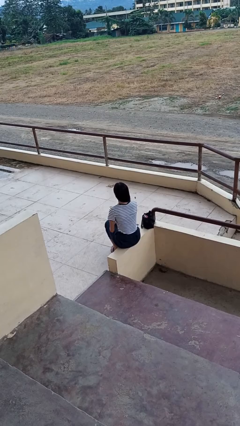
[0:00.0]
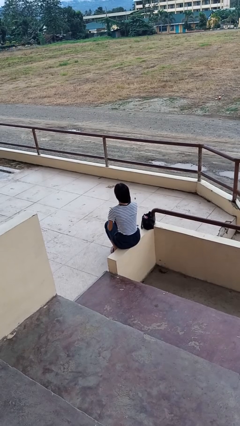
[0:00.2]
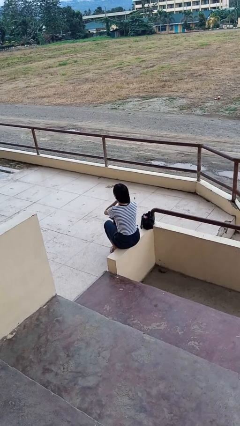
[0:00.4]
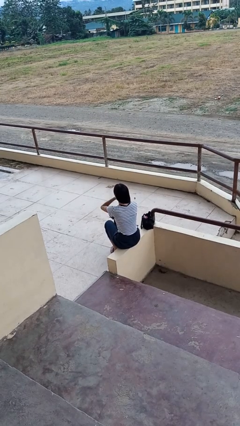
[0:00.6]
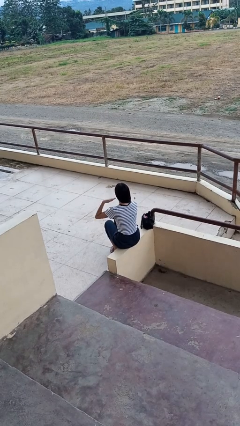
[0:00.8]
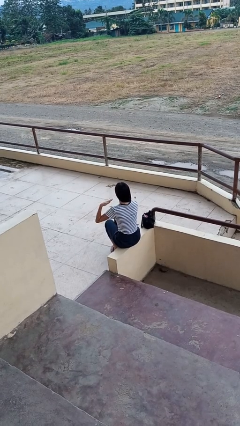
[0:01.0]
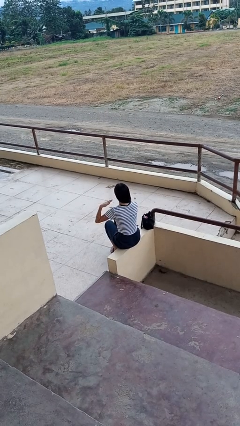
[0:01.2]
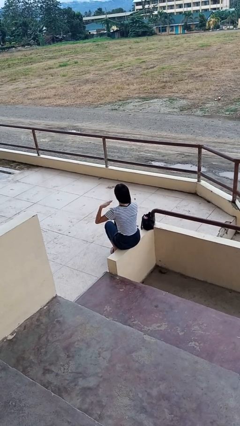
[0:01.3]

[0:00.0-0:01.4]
person gestures cut

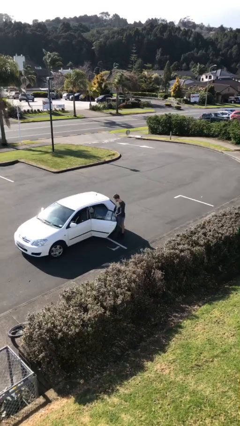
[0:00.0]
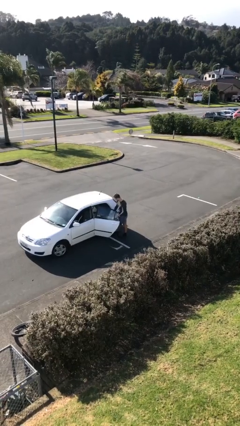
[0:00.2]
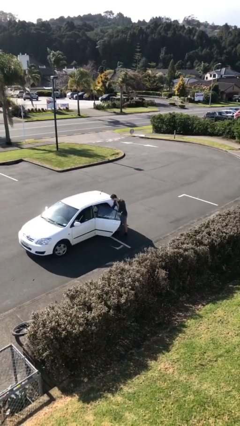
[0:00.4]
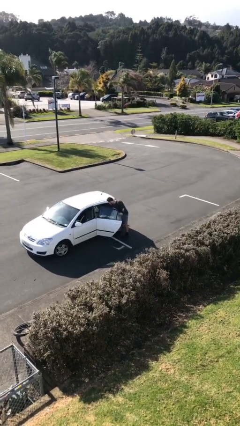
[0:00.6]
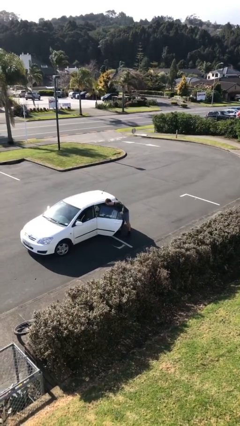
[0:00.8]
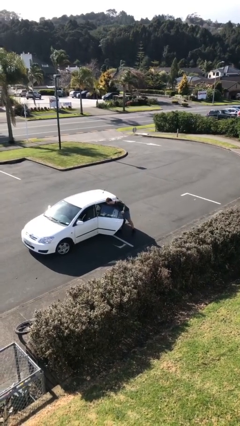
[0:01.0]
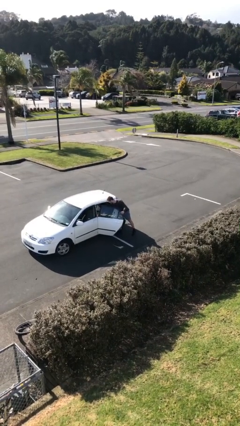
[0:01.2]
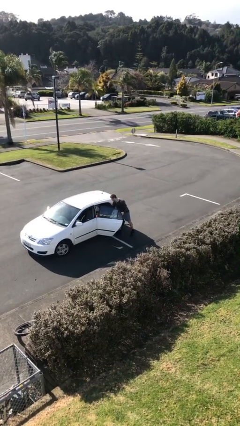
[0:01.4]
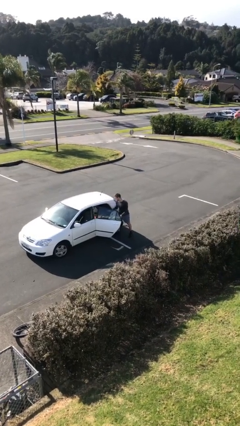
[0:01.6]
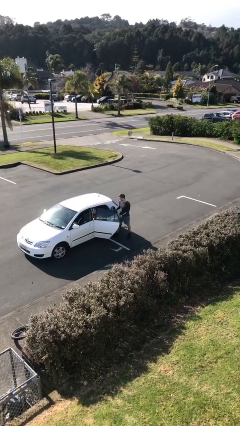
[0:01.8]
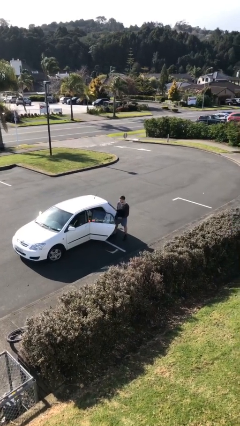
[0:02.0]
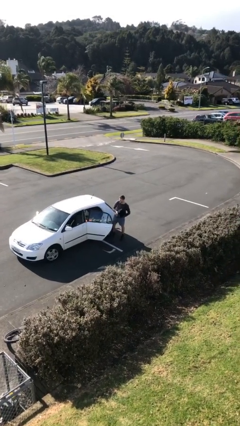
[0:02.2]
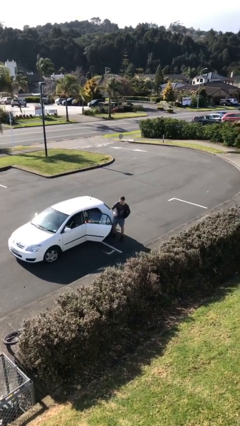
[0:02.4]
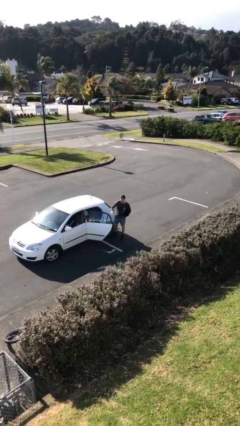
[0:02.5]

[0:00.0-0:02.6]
person unloads car

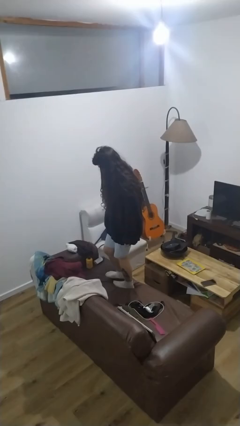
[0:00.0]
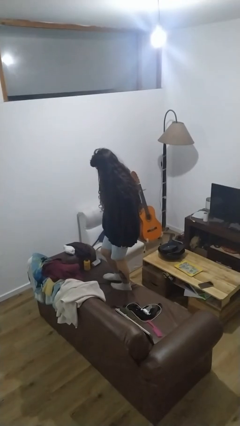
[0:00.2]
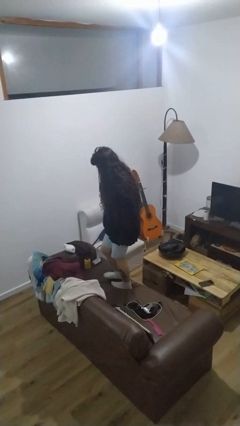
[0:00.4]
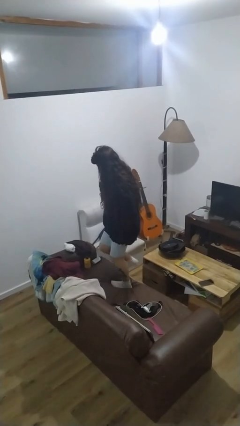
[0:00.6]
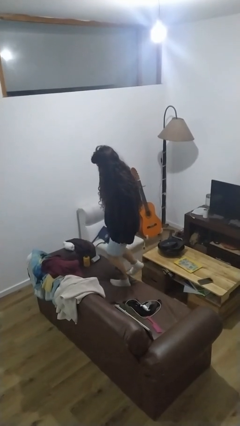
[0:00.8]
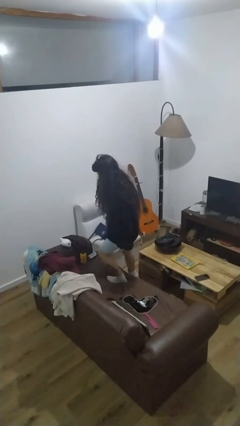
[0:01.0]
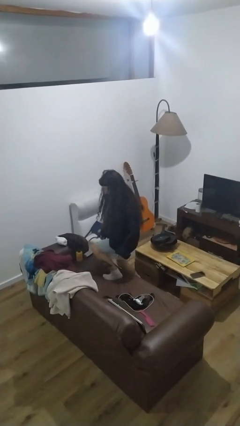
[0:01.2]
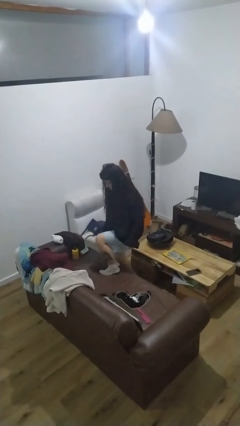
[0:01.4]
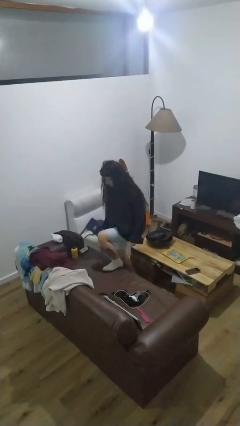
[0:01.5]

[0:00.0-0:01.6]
person climbs off couch

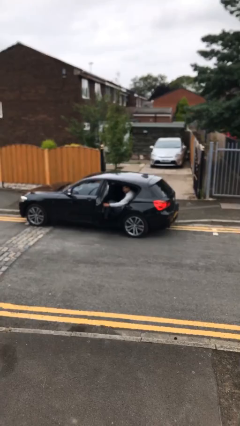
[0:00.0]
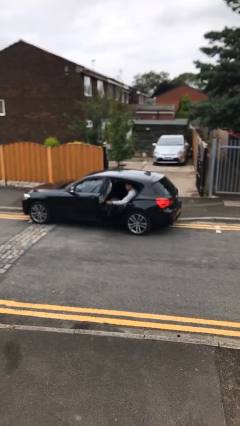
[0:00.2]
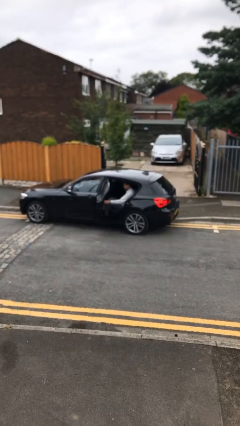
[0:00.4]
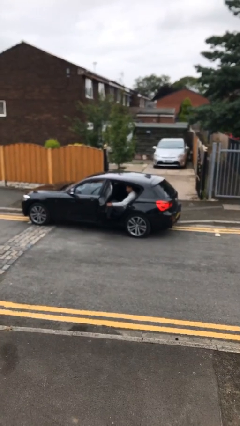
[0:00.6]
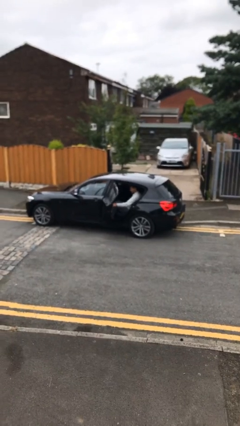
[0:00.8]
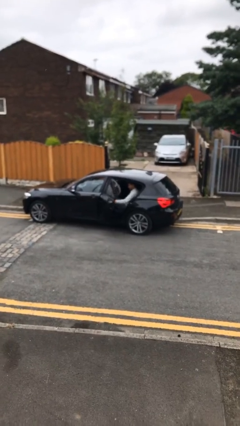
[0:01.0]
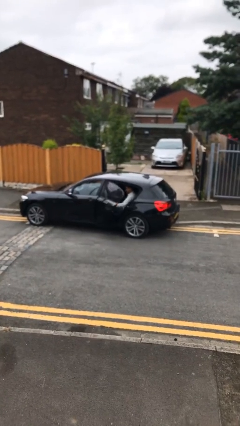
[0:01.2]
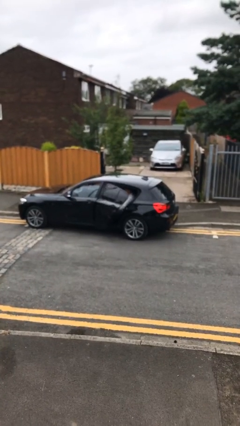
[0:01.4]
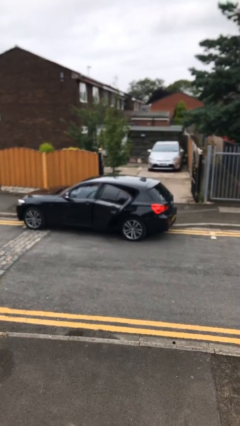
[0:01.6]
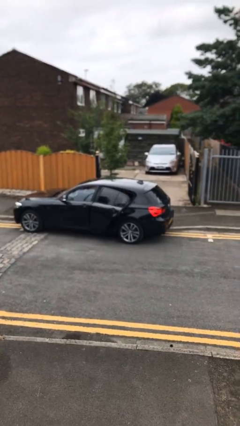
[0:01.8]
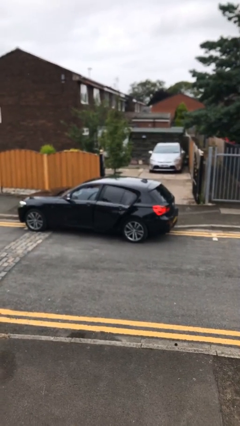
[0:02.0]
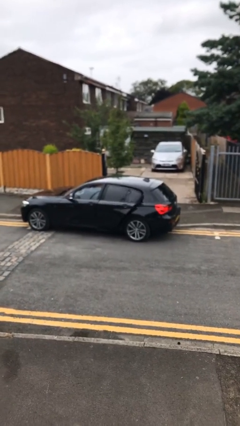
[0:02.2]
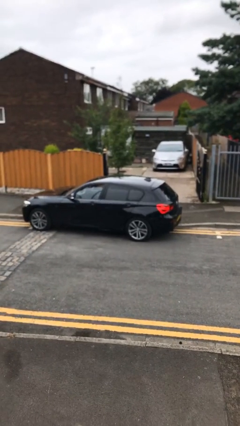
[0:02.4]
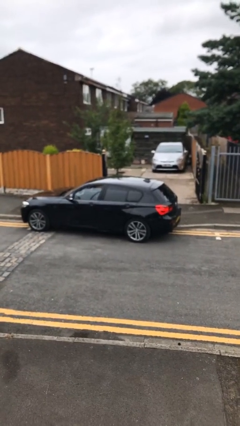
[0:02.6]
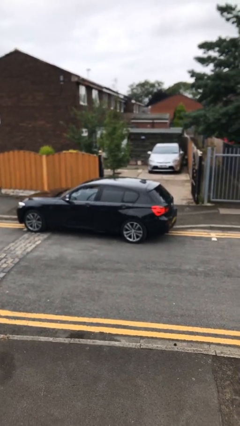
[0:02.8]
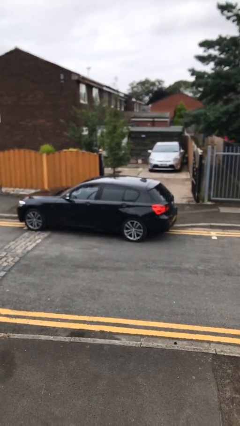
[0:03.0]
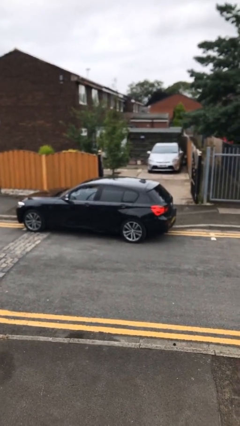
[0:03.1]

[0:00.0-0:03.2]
person closes car door

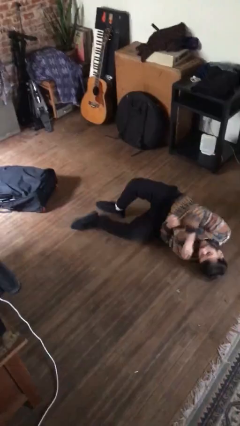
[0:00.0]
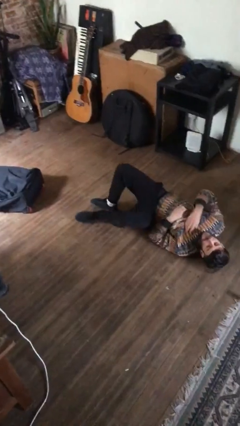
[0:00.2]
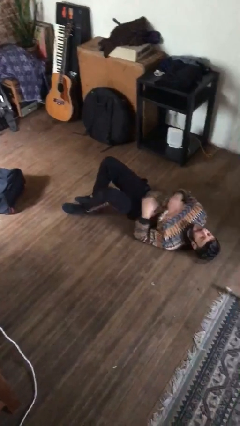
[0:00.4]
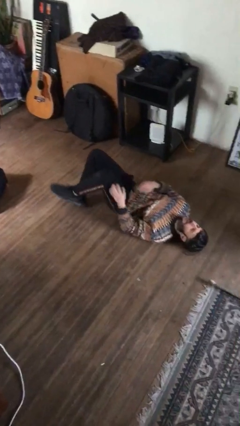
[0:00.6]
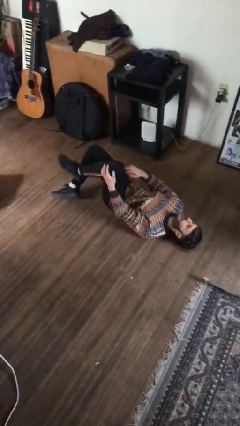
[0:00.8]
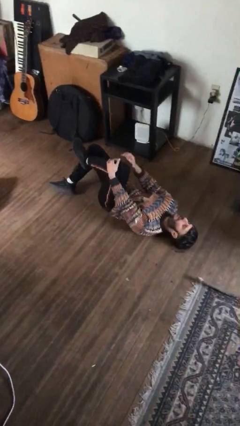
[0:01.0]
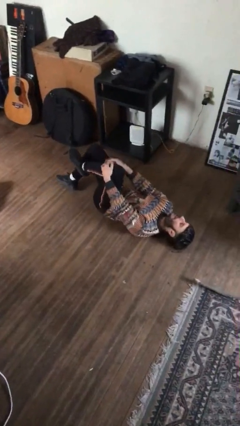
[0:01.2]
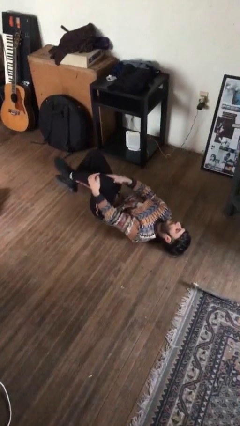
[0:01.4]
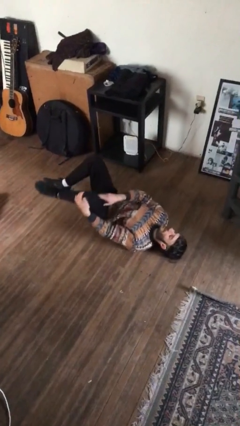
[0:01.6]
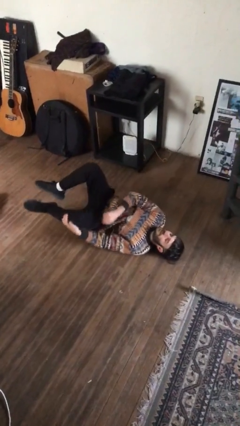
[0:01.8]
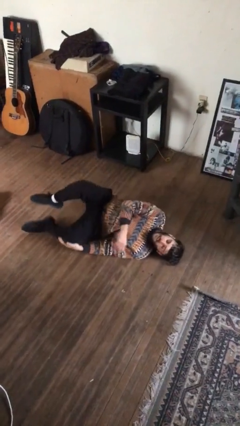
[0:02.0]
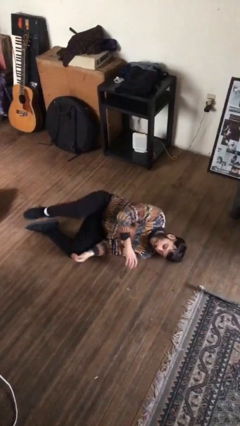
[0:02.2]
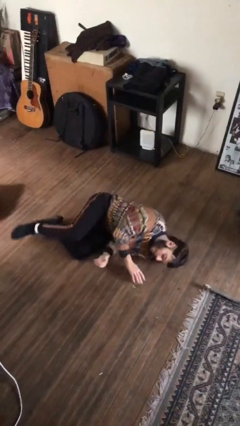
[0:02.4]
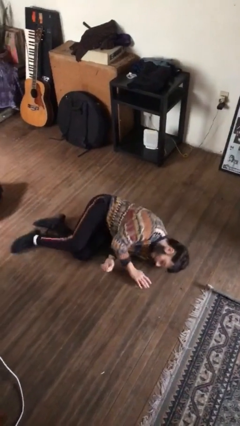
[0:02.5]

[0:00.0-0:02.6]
person lies down on floor

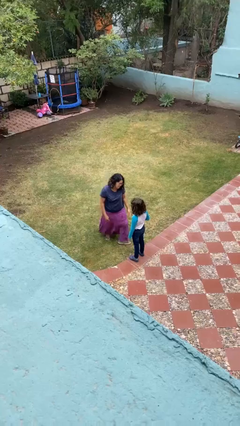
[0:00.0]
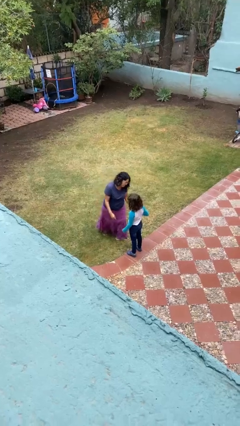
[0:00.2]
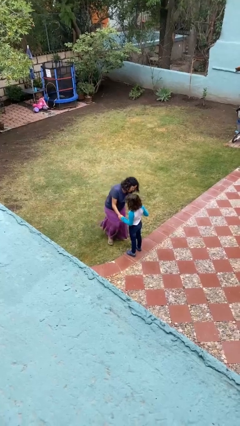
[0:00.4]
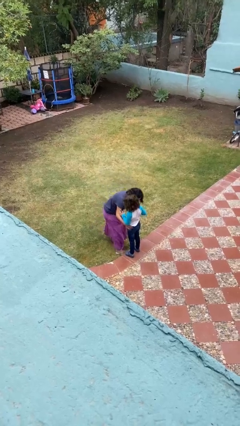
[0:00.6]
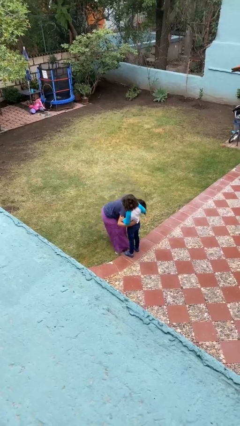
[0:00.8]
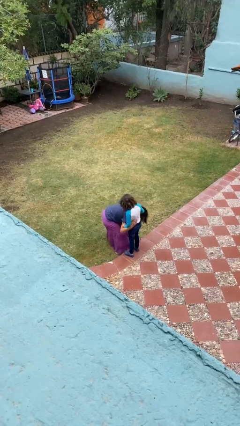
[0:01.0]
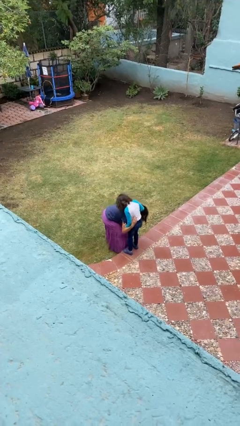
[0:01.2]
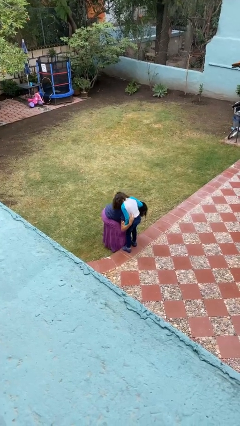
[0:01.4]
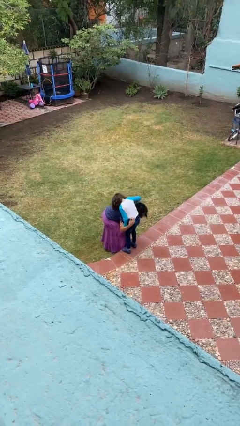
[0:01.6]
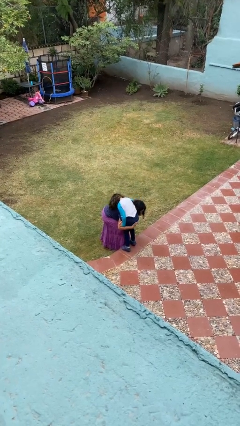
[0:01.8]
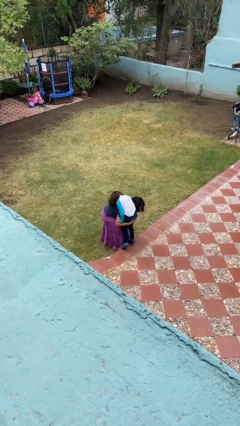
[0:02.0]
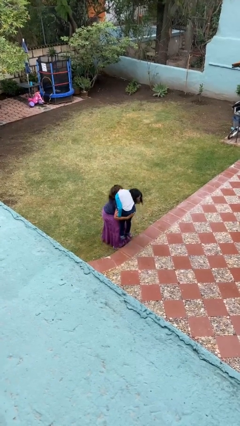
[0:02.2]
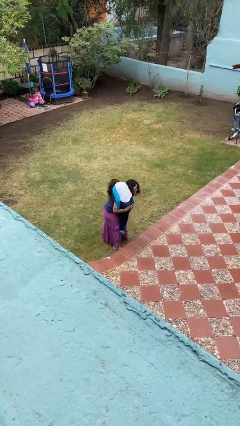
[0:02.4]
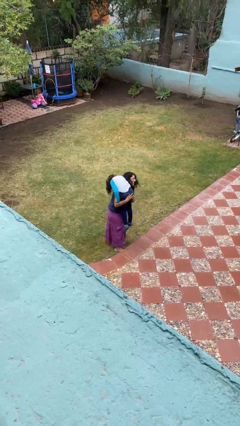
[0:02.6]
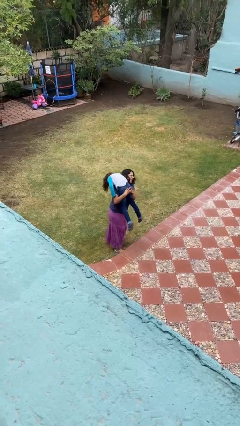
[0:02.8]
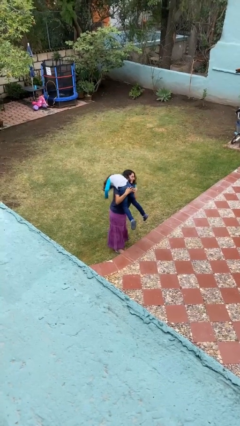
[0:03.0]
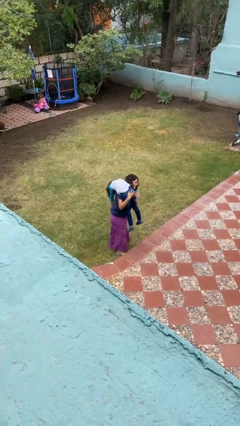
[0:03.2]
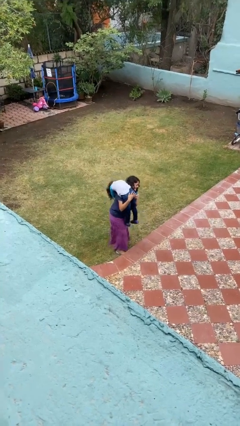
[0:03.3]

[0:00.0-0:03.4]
person carries person over shoulder

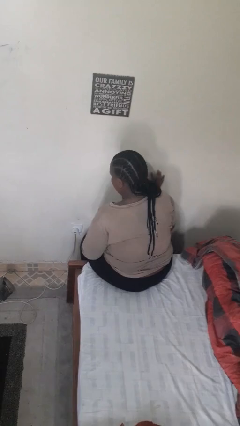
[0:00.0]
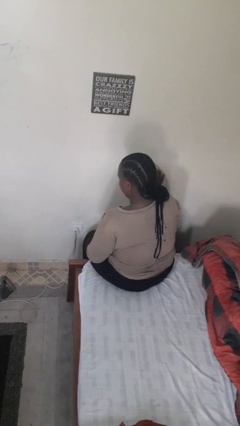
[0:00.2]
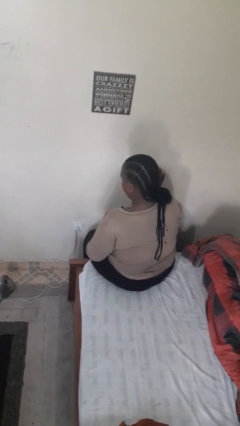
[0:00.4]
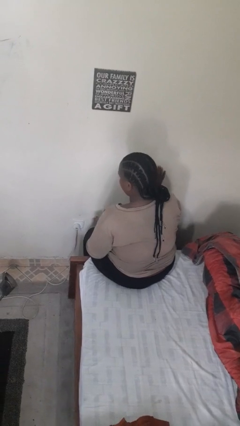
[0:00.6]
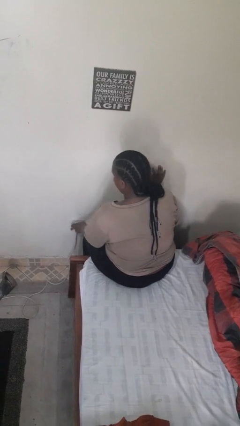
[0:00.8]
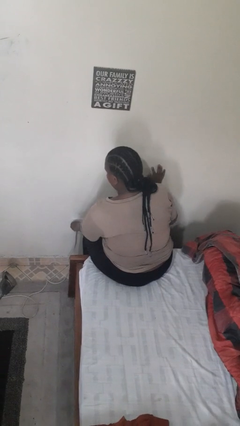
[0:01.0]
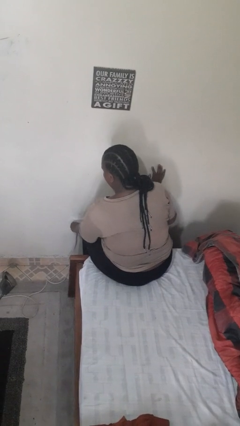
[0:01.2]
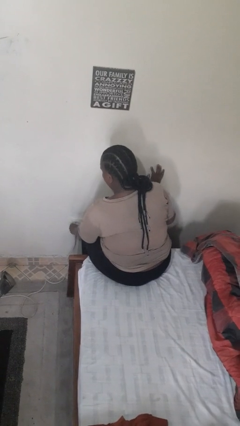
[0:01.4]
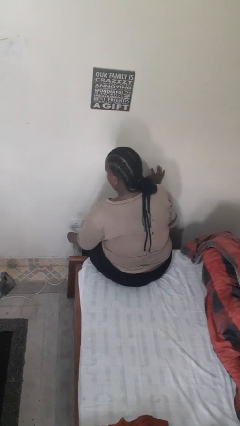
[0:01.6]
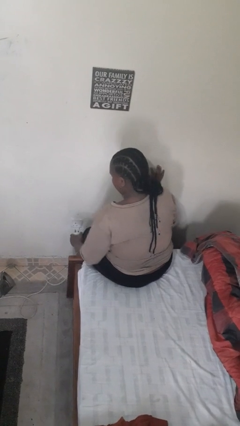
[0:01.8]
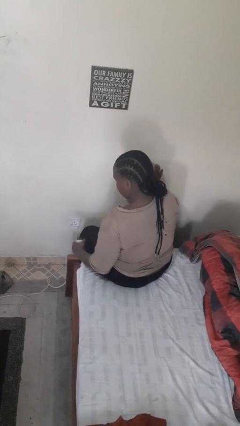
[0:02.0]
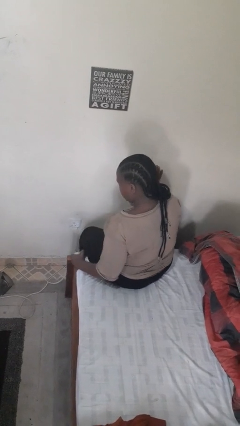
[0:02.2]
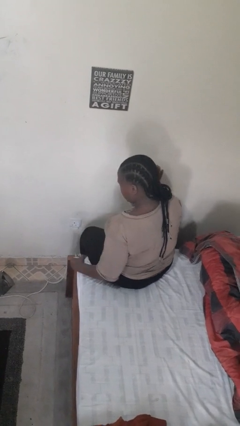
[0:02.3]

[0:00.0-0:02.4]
person unplugs from electrical socket
